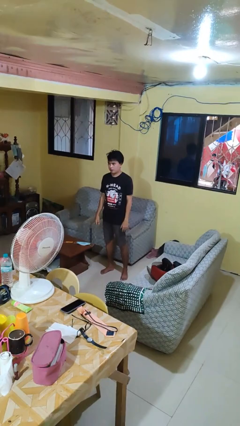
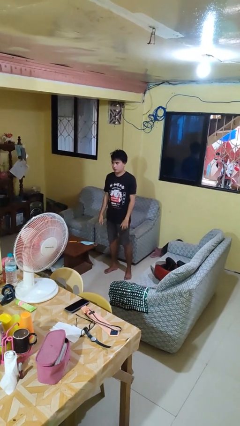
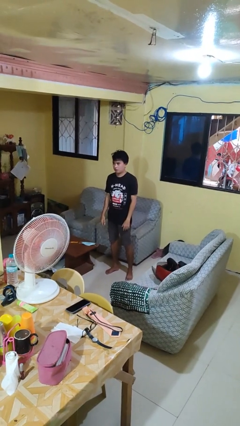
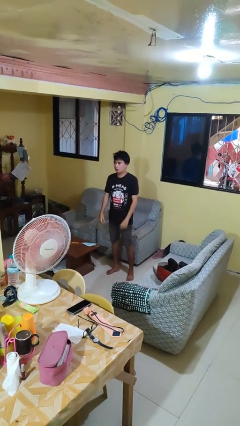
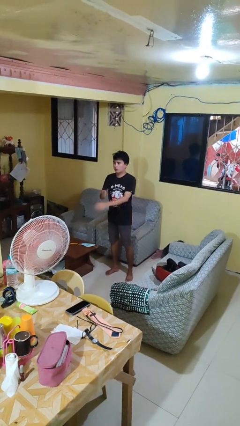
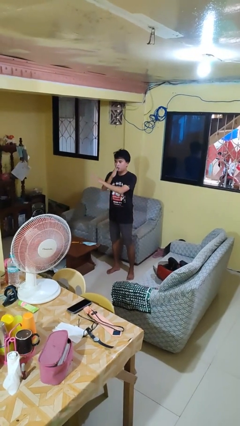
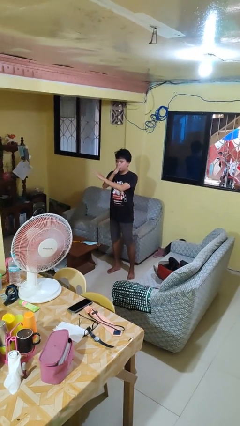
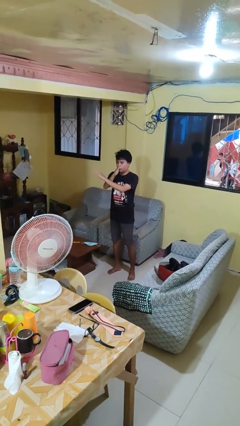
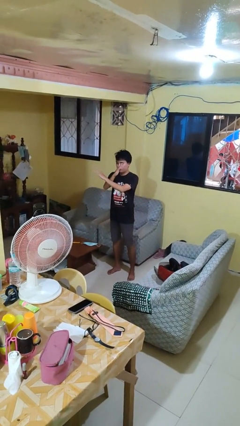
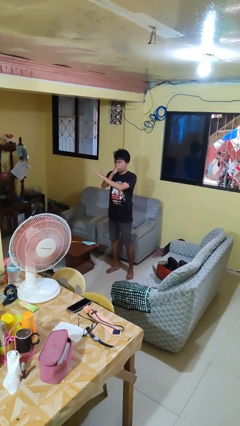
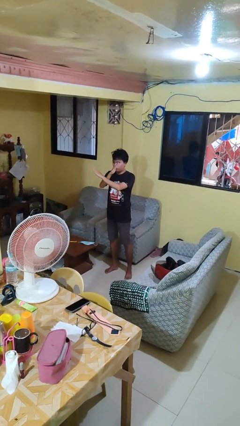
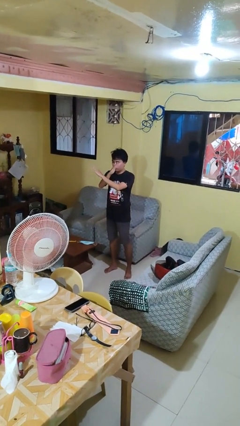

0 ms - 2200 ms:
person gestures arms x

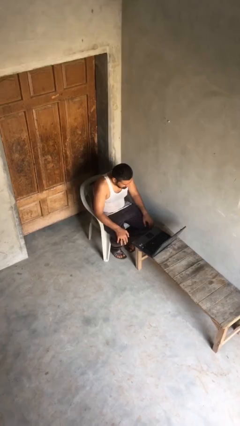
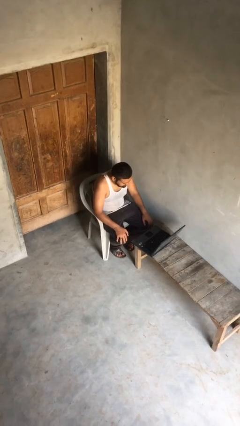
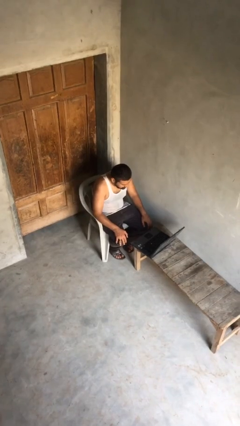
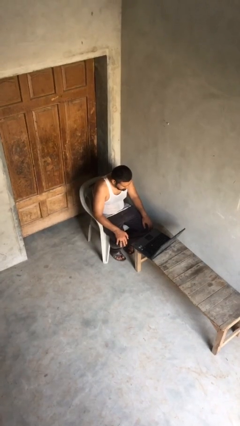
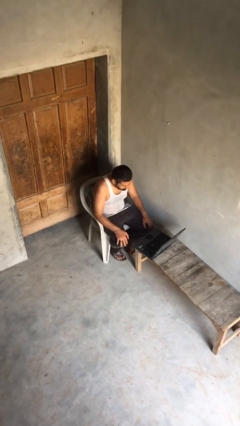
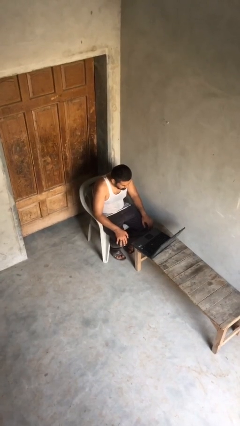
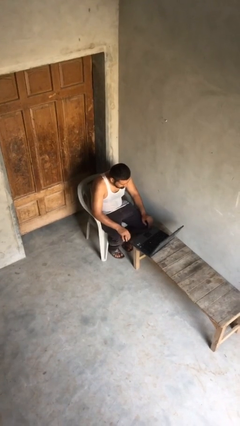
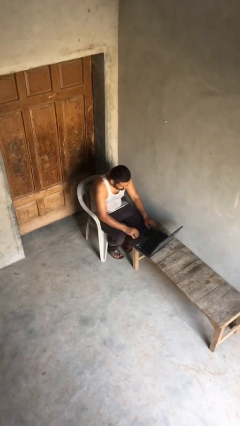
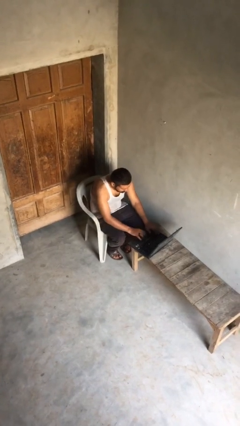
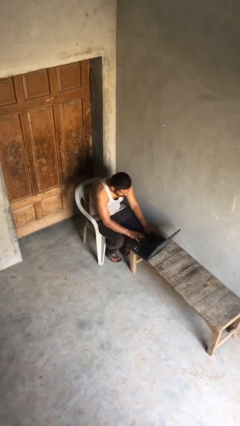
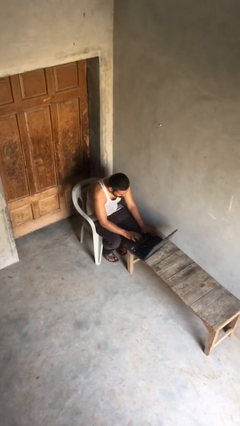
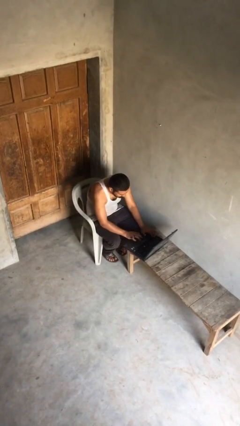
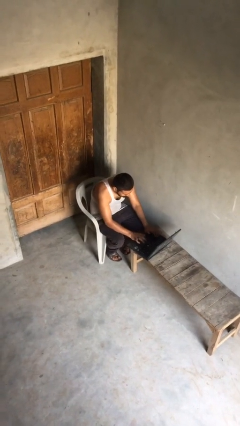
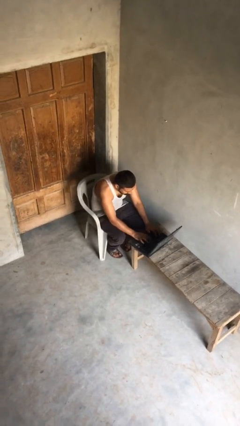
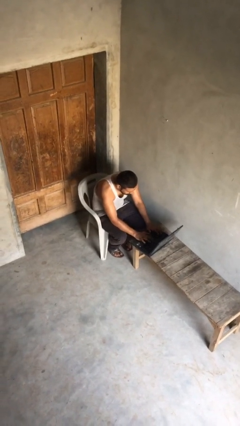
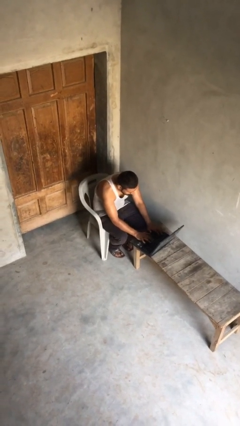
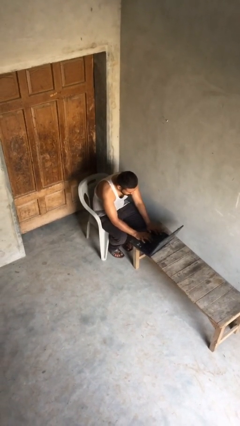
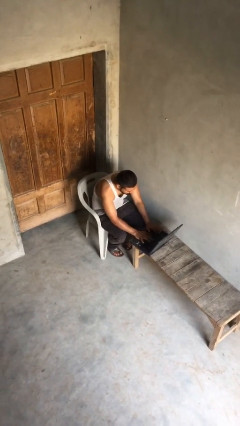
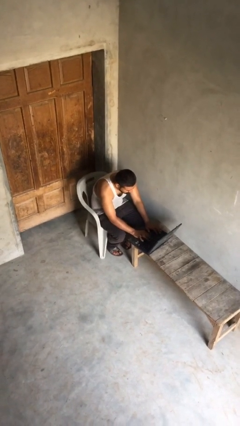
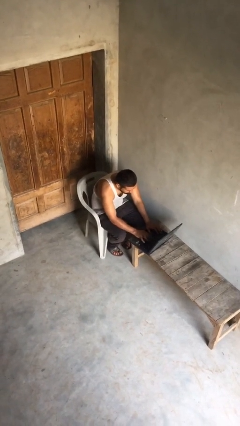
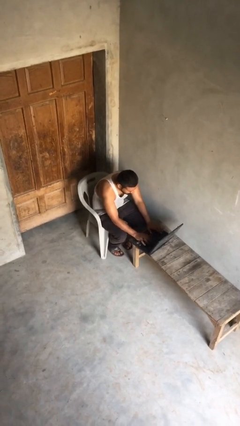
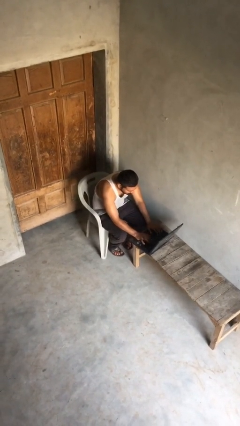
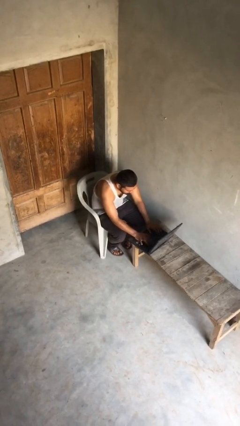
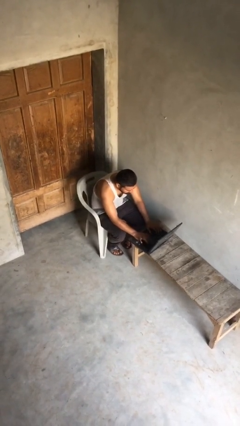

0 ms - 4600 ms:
person interacts with laptop

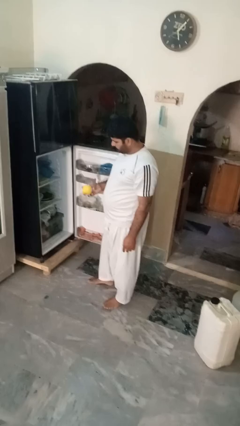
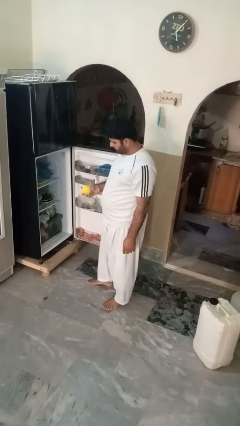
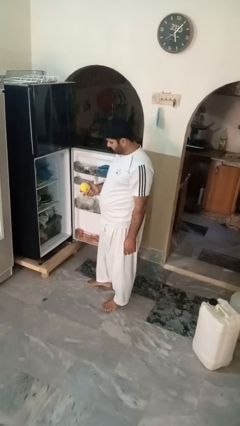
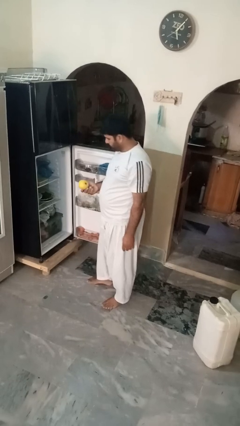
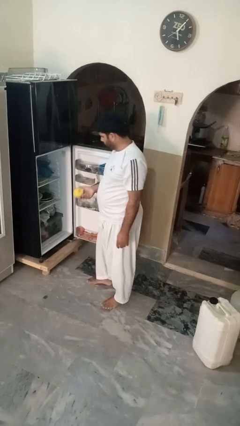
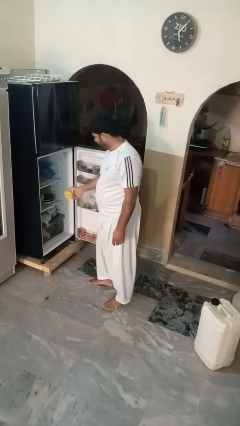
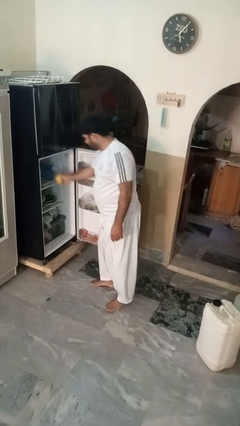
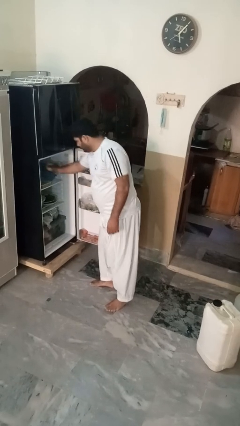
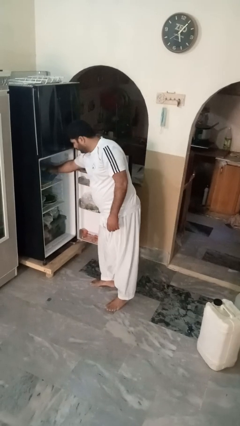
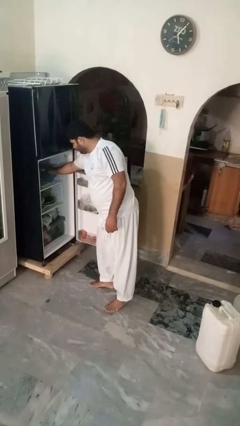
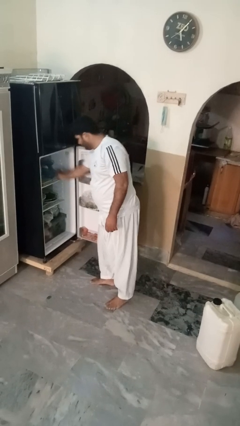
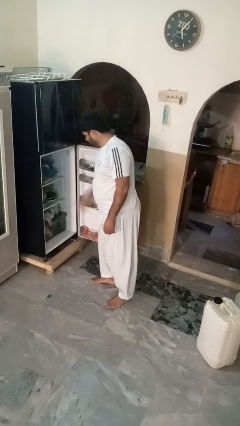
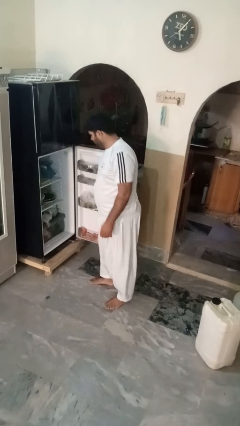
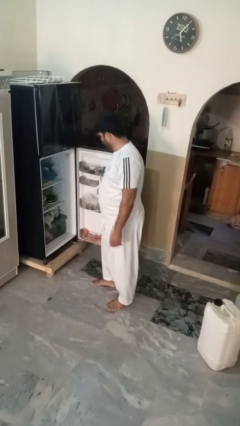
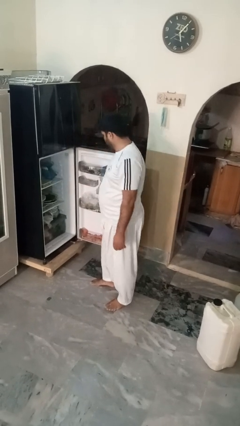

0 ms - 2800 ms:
person puts object into refrigerator

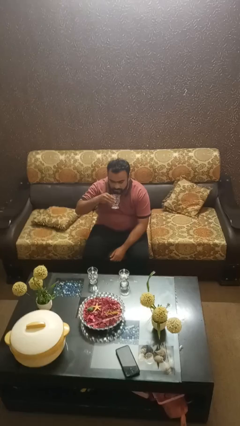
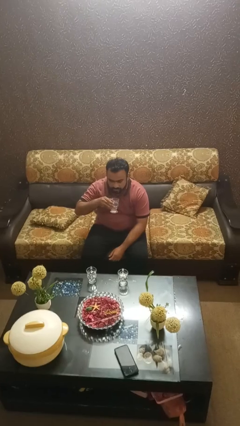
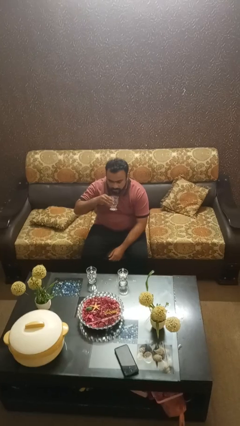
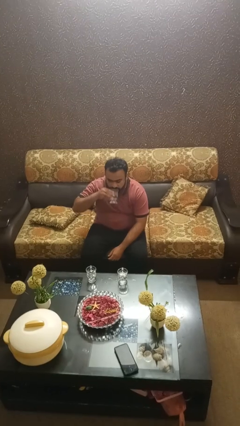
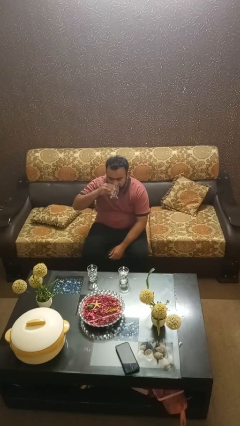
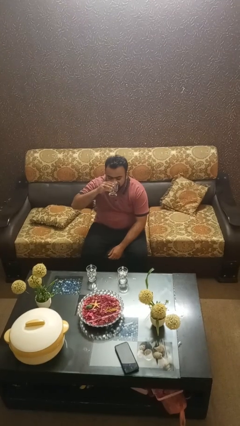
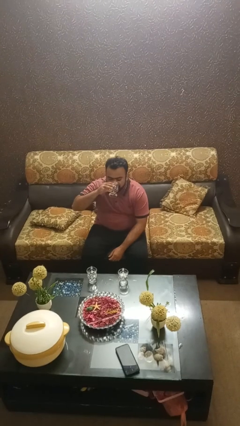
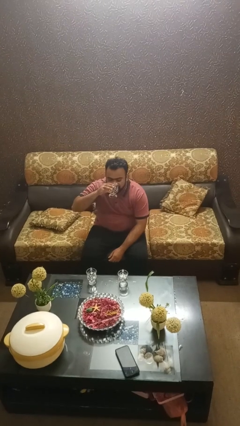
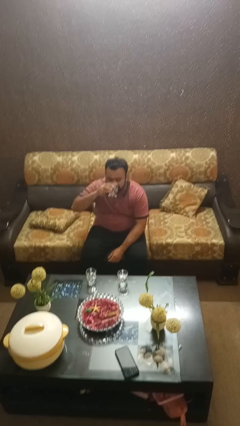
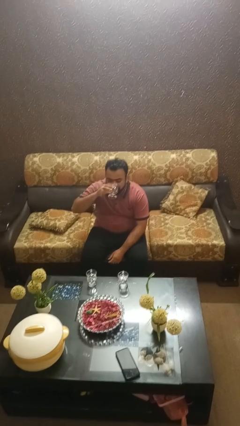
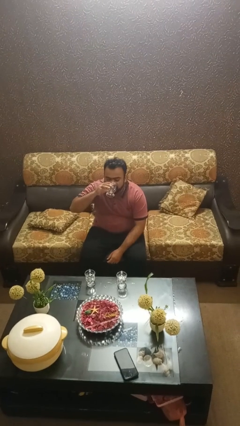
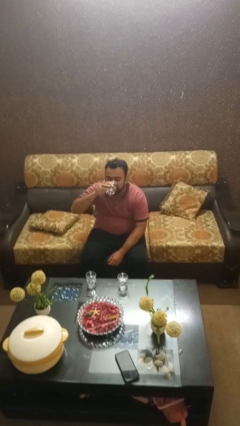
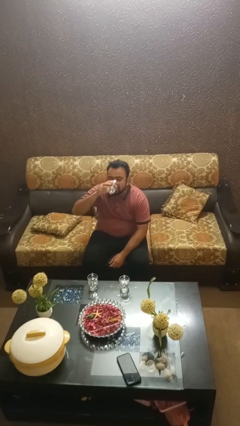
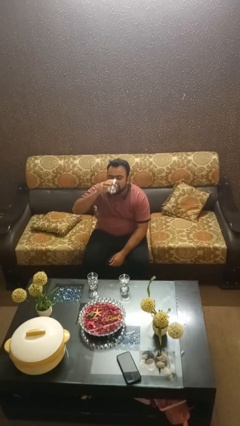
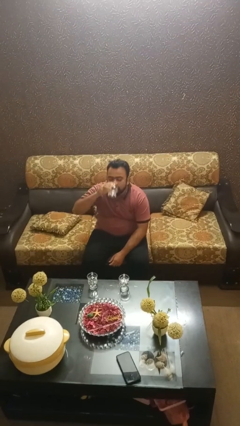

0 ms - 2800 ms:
person drinks from shotglass

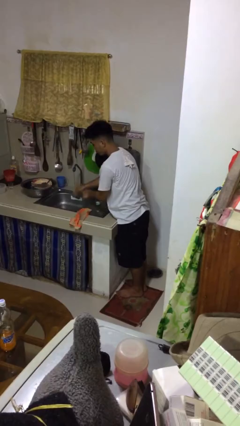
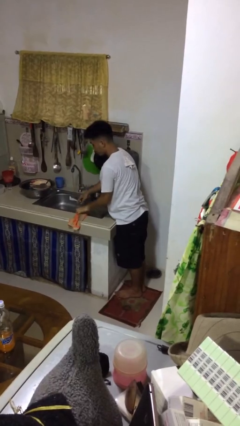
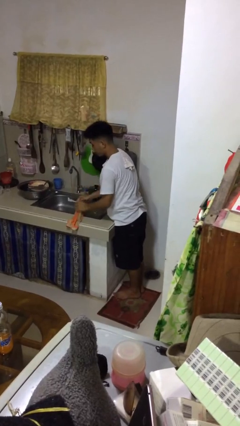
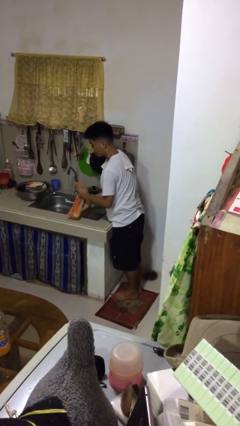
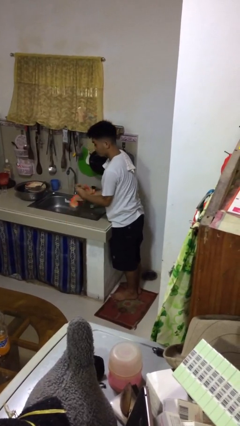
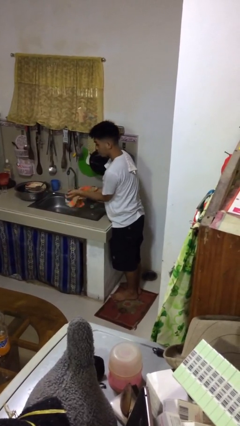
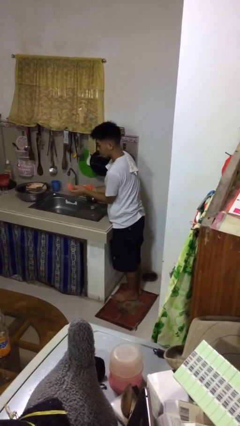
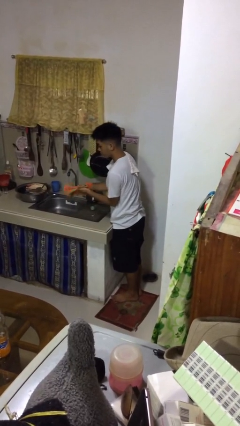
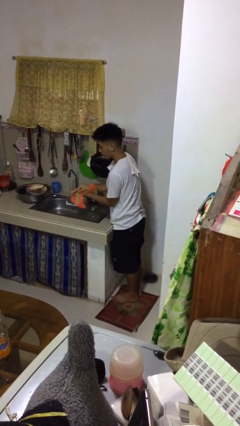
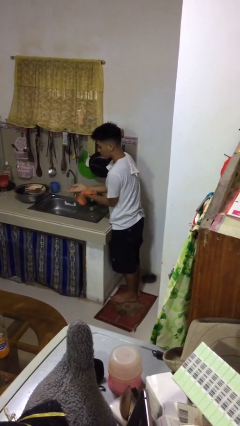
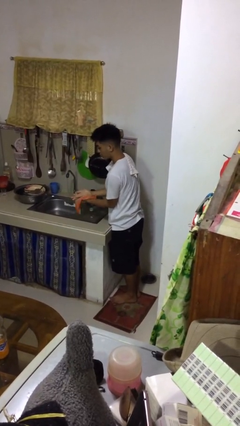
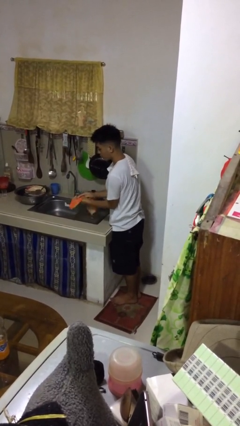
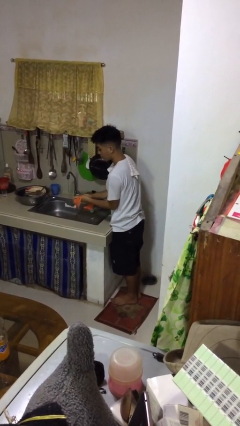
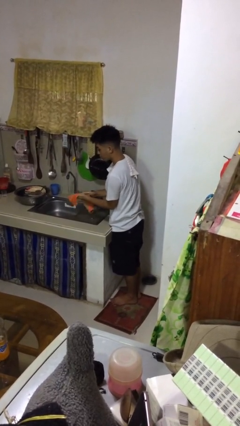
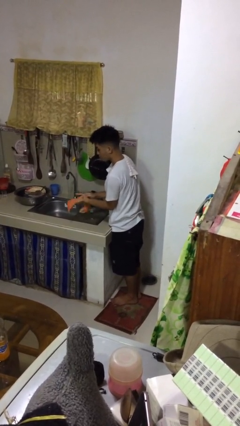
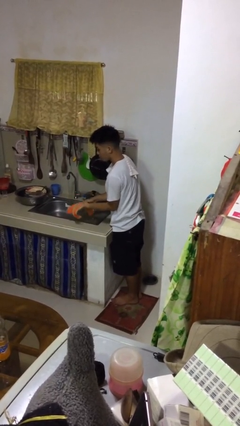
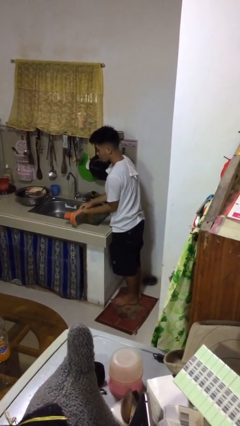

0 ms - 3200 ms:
person dries hands with towel

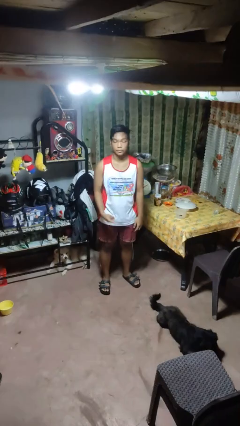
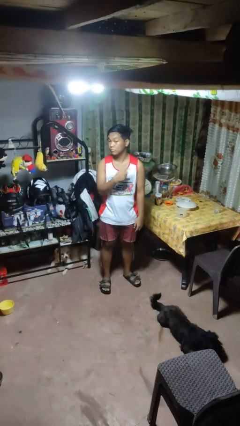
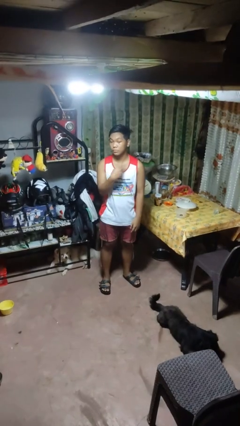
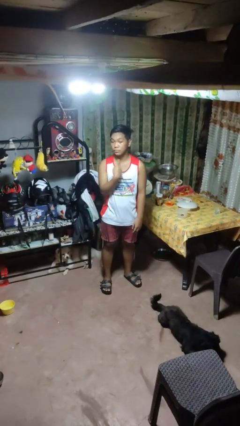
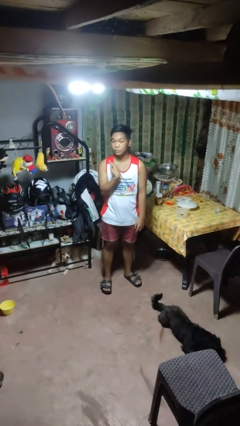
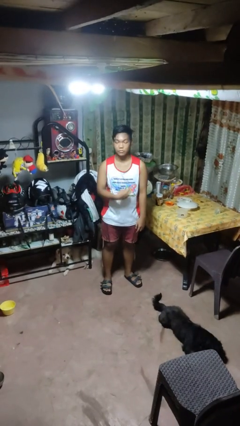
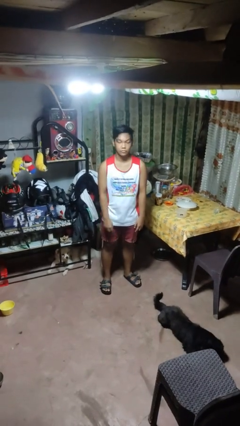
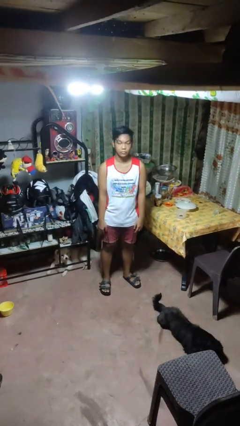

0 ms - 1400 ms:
person gestures cut

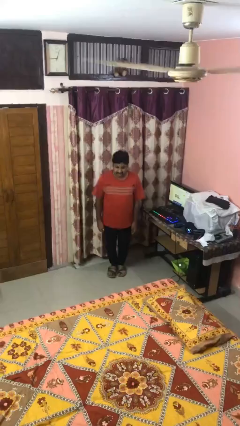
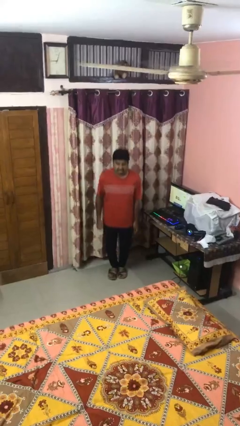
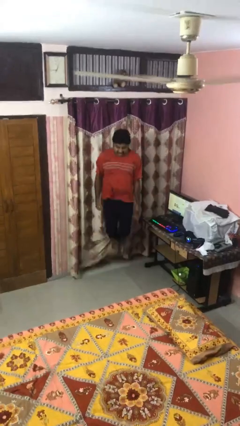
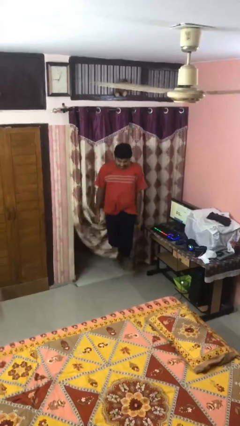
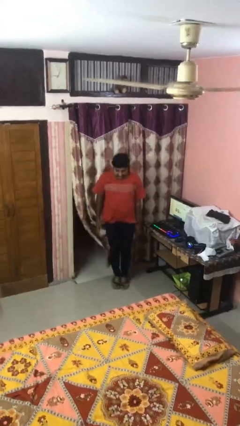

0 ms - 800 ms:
person jumps
